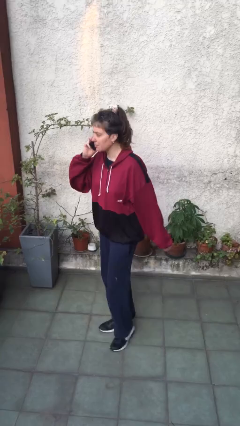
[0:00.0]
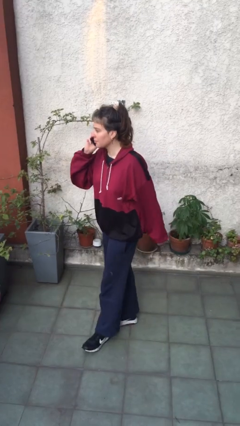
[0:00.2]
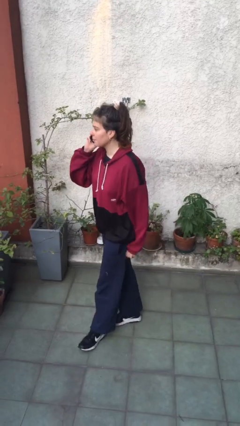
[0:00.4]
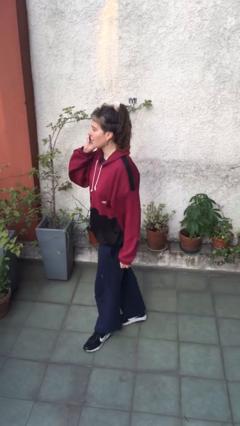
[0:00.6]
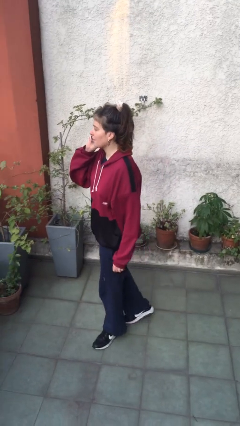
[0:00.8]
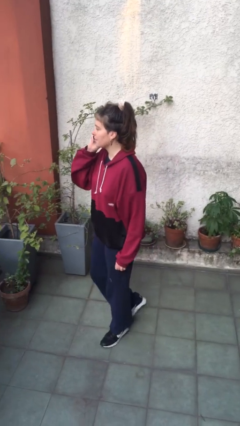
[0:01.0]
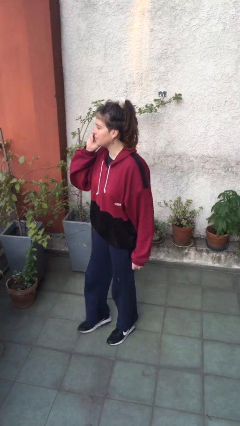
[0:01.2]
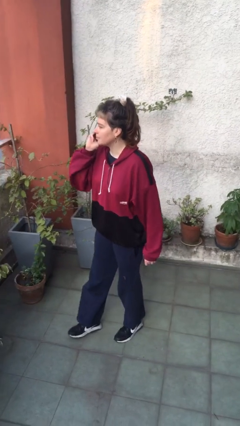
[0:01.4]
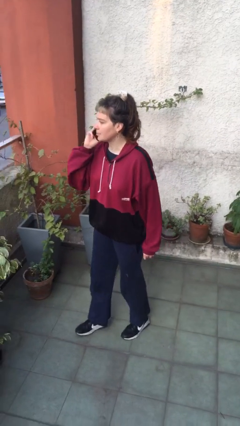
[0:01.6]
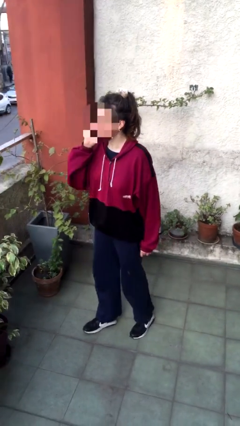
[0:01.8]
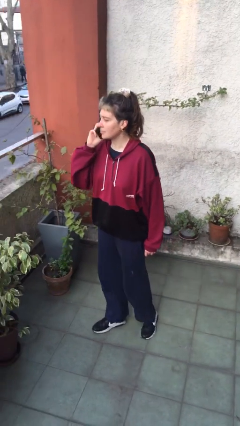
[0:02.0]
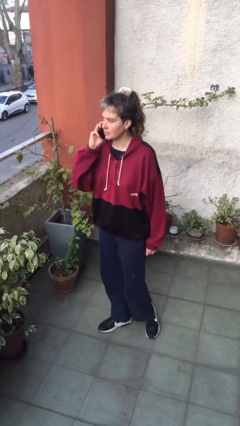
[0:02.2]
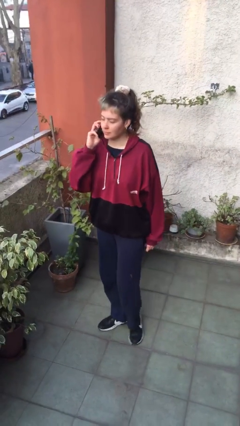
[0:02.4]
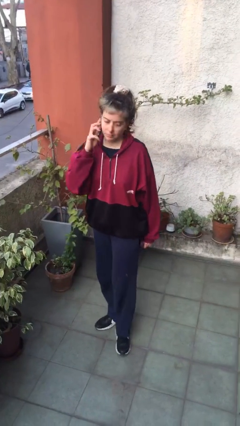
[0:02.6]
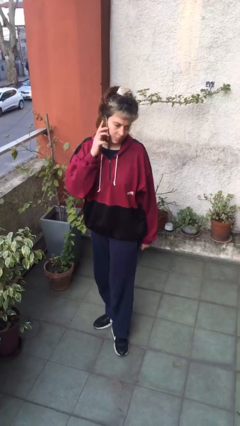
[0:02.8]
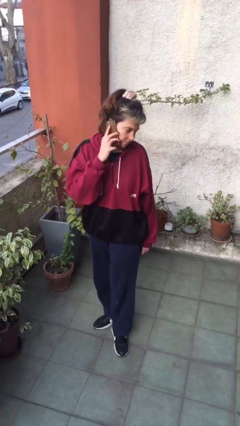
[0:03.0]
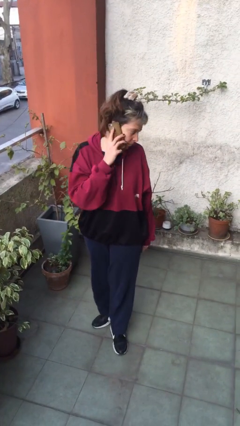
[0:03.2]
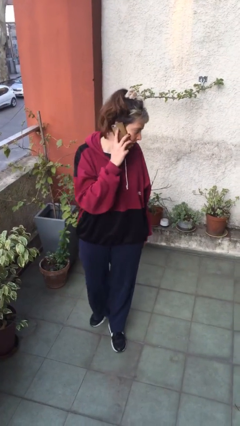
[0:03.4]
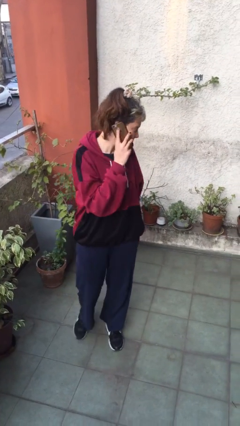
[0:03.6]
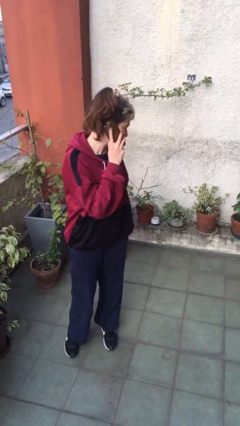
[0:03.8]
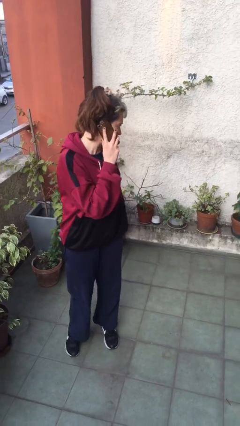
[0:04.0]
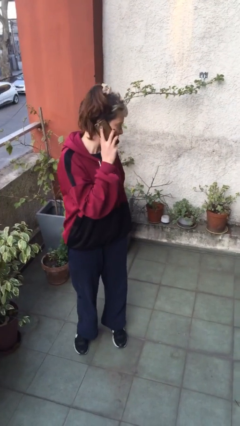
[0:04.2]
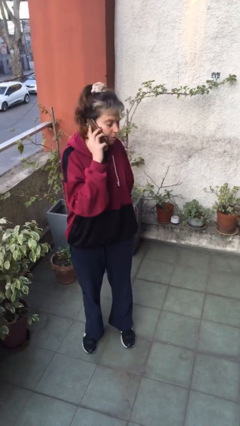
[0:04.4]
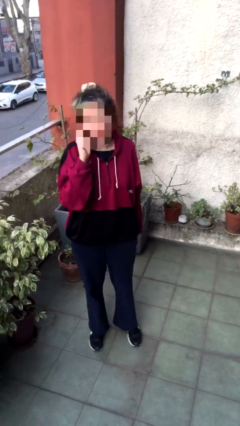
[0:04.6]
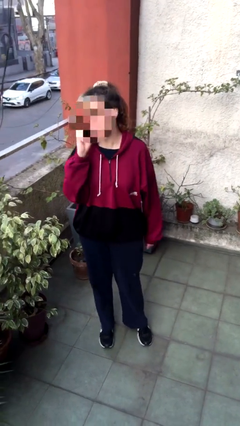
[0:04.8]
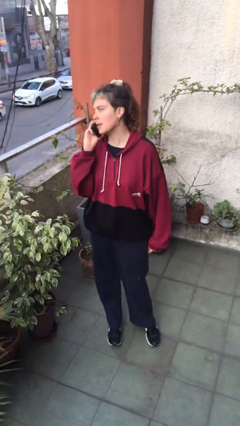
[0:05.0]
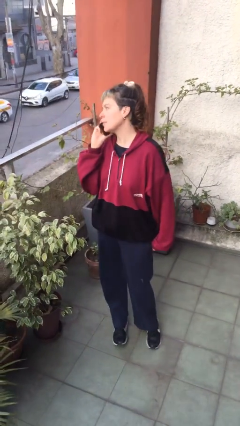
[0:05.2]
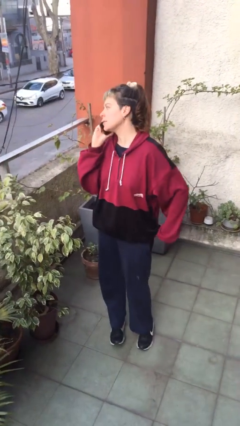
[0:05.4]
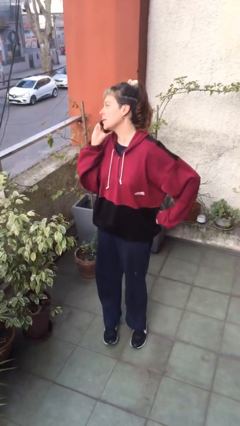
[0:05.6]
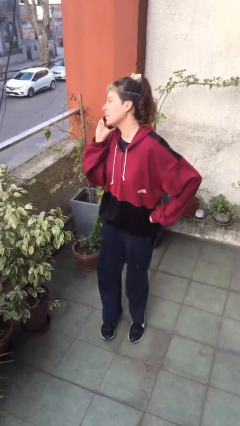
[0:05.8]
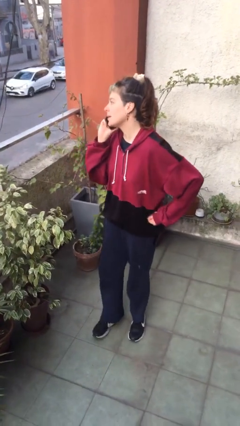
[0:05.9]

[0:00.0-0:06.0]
person talks on phone

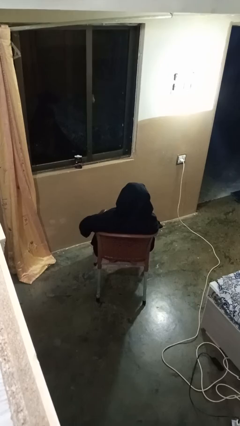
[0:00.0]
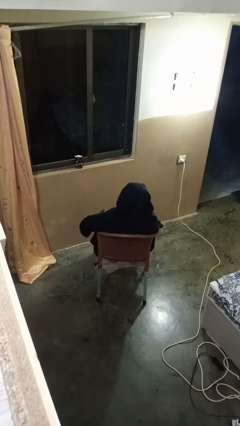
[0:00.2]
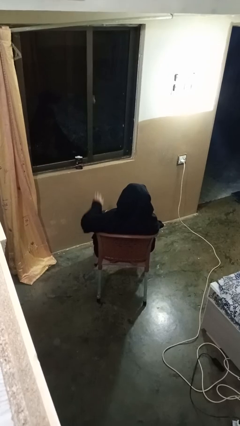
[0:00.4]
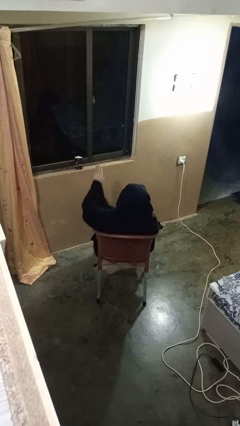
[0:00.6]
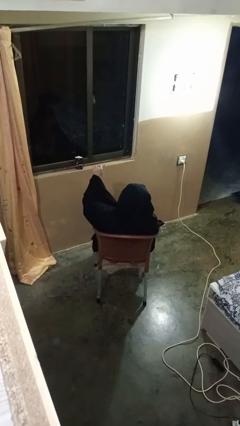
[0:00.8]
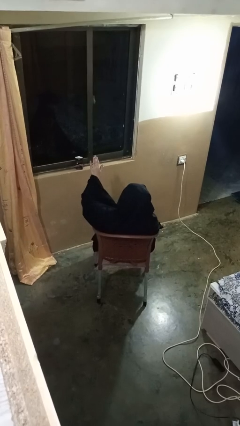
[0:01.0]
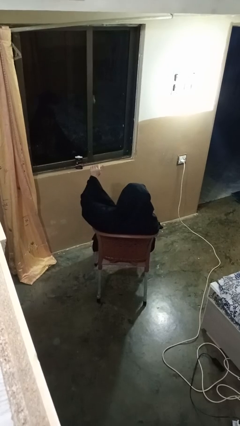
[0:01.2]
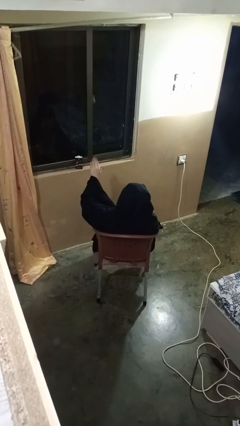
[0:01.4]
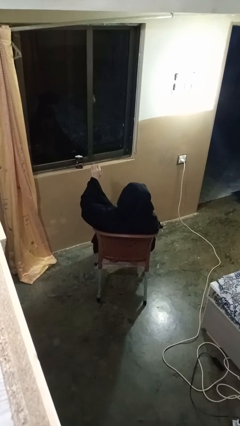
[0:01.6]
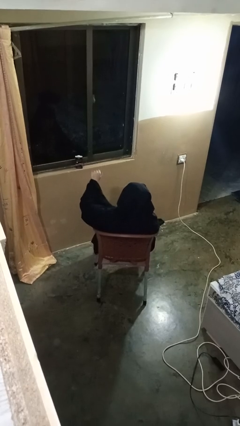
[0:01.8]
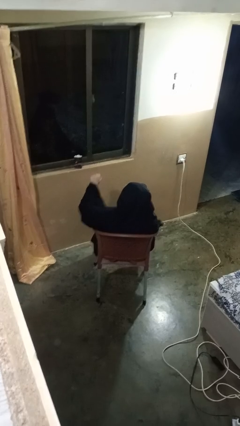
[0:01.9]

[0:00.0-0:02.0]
person gestures come here

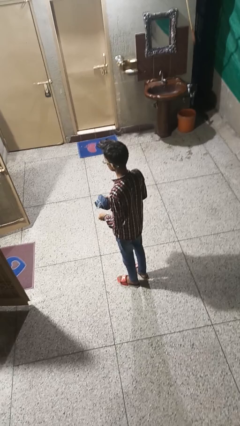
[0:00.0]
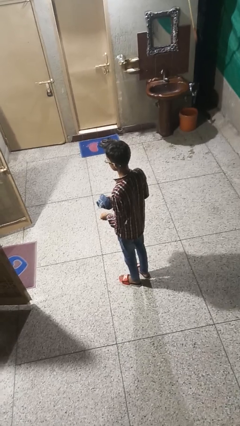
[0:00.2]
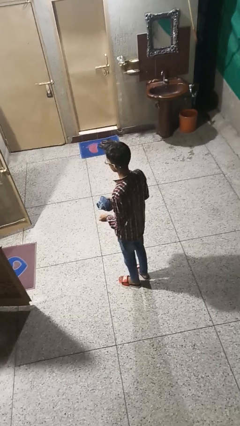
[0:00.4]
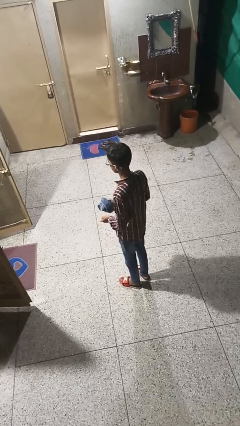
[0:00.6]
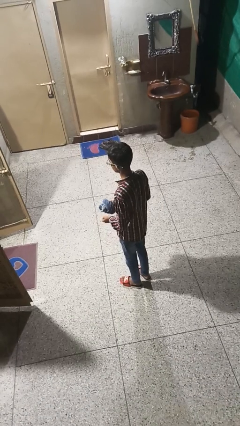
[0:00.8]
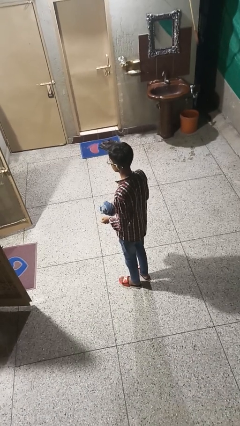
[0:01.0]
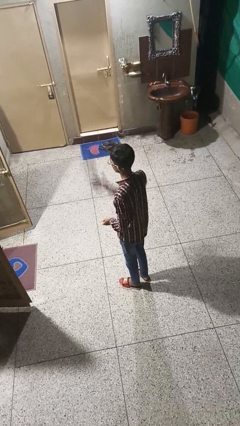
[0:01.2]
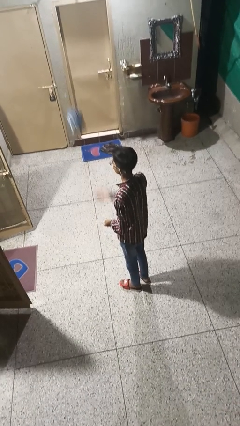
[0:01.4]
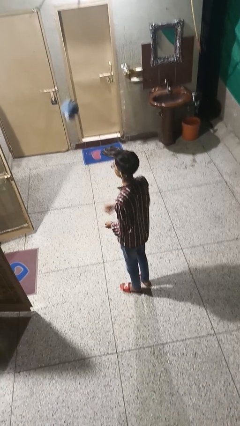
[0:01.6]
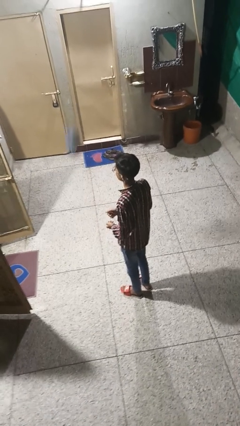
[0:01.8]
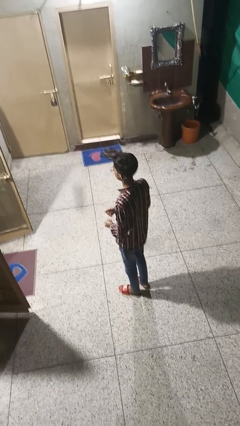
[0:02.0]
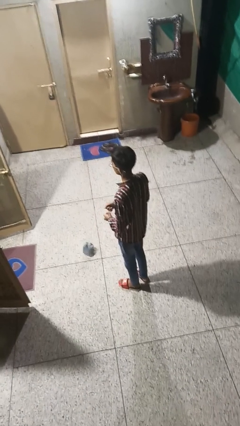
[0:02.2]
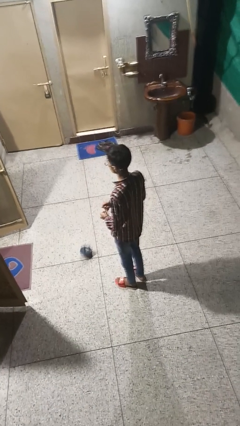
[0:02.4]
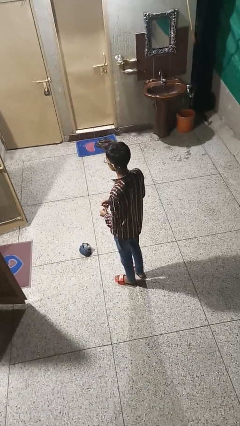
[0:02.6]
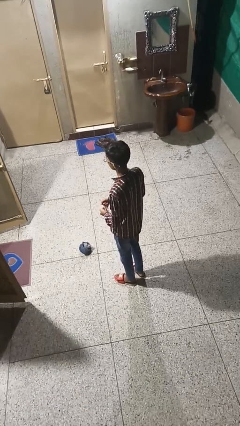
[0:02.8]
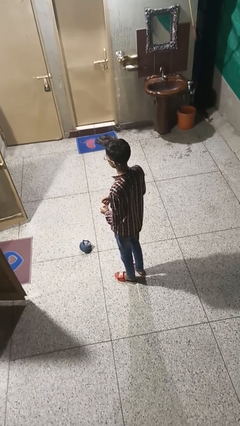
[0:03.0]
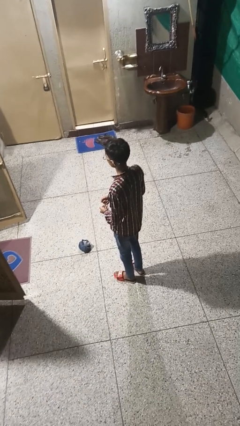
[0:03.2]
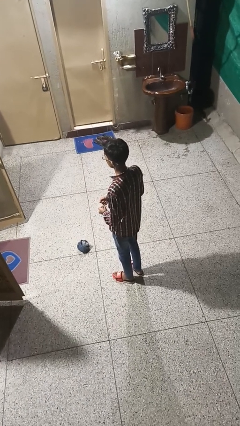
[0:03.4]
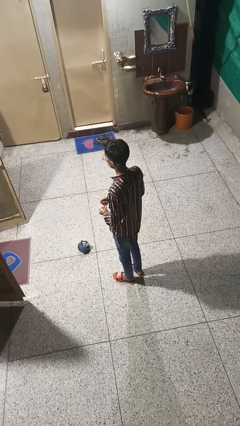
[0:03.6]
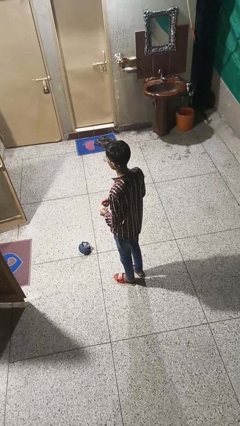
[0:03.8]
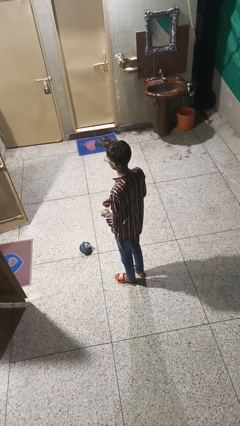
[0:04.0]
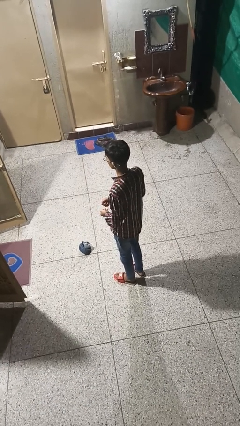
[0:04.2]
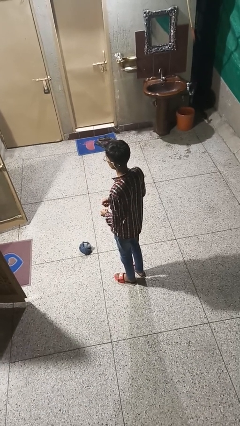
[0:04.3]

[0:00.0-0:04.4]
person throws object into air

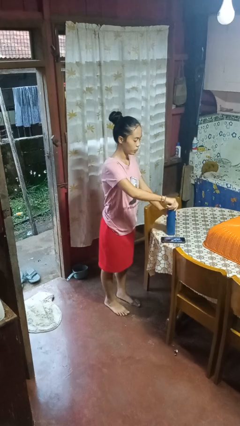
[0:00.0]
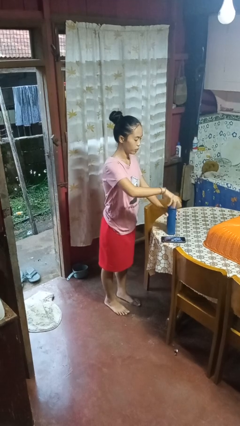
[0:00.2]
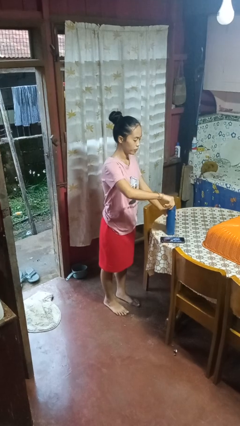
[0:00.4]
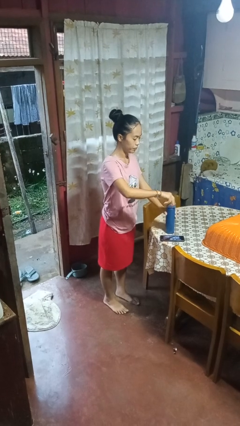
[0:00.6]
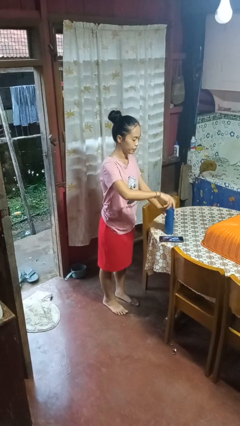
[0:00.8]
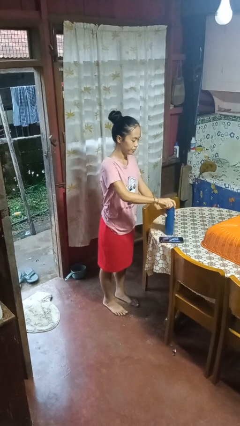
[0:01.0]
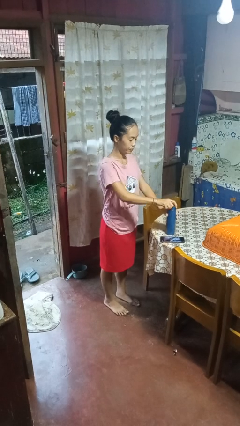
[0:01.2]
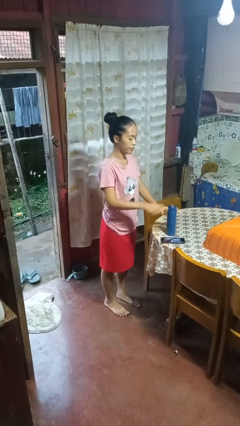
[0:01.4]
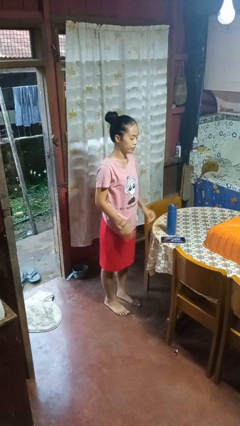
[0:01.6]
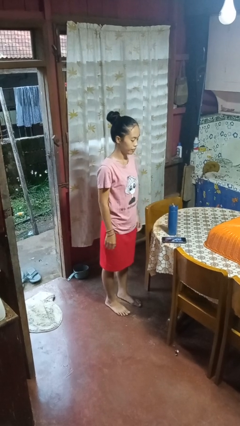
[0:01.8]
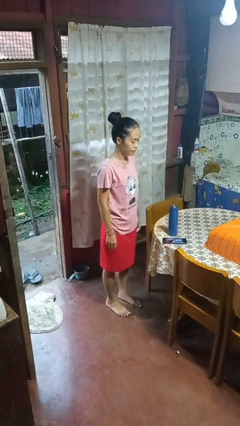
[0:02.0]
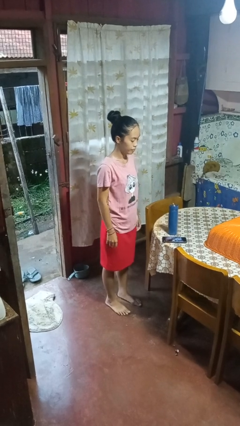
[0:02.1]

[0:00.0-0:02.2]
person closes jar

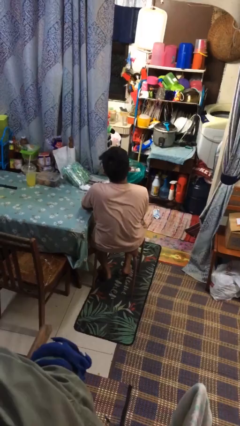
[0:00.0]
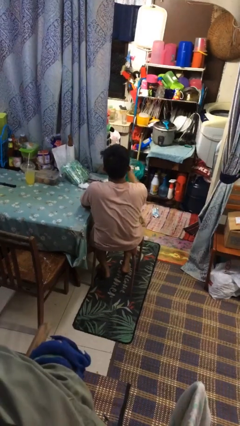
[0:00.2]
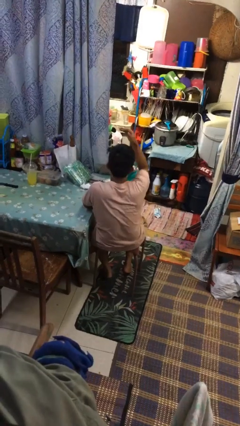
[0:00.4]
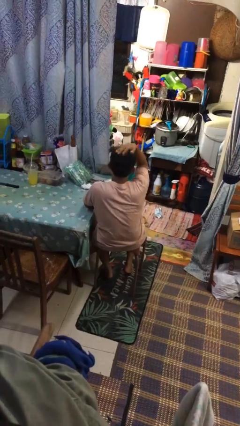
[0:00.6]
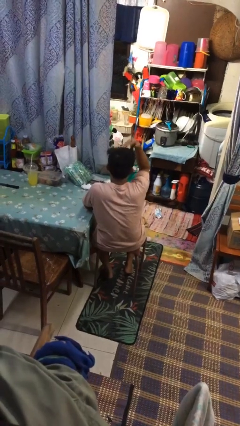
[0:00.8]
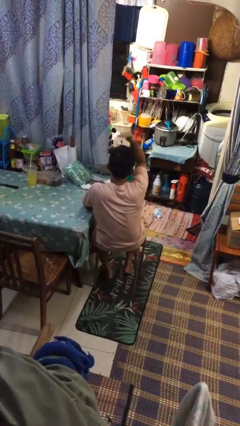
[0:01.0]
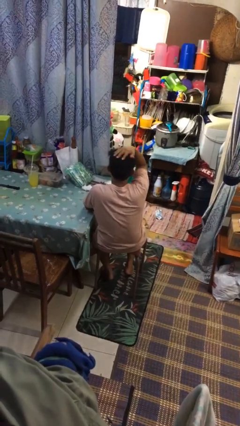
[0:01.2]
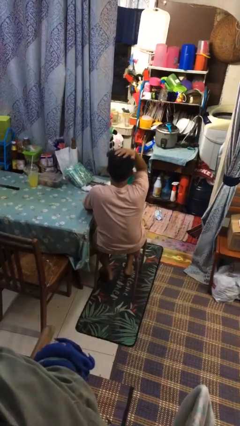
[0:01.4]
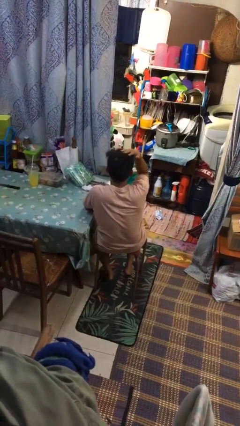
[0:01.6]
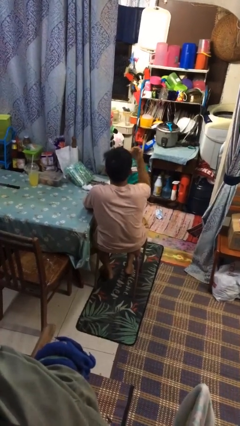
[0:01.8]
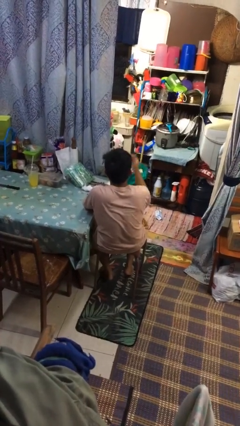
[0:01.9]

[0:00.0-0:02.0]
person pats head

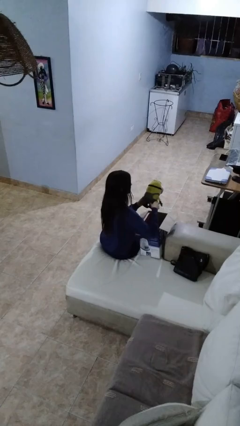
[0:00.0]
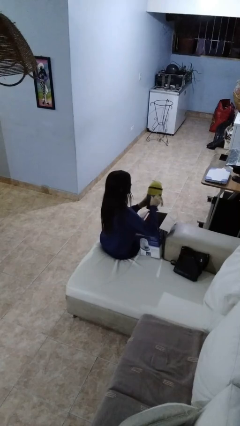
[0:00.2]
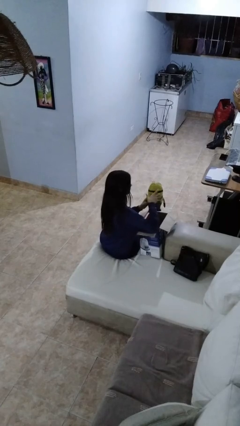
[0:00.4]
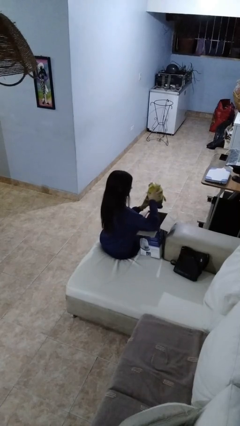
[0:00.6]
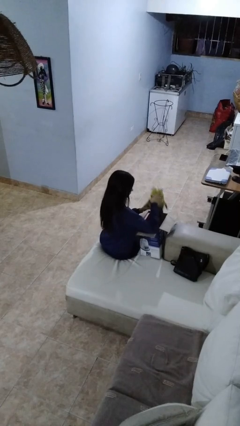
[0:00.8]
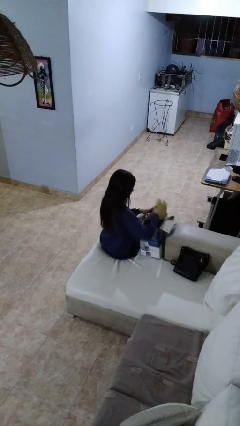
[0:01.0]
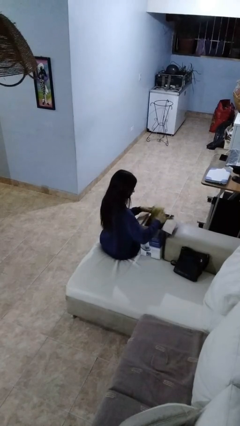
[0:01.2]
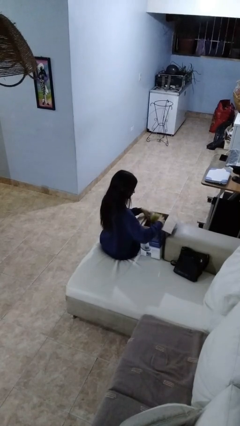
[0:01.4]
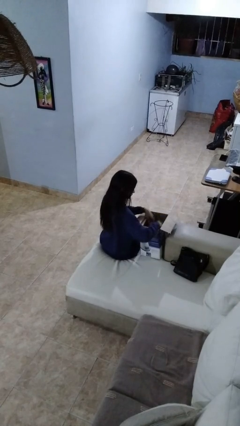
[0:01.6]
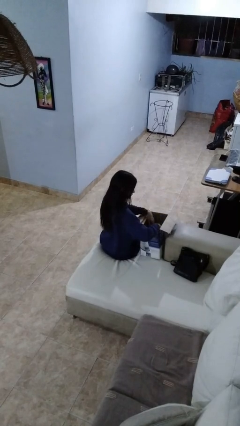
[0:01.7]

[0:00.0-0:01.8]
person puts object into box
